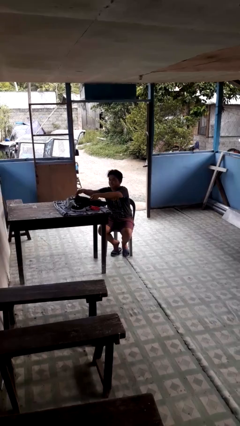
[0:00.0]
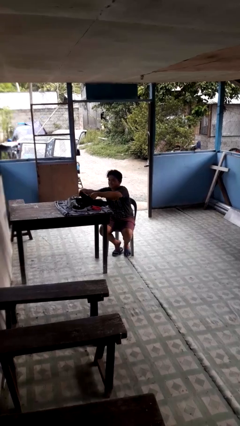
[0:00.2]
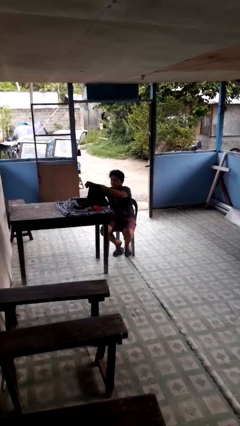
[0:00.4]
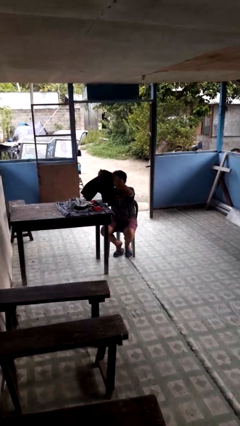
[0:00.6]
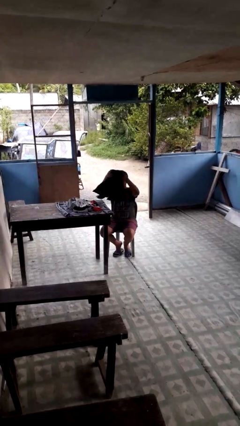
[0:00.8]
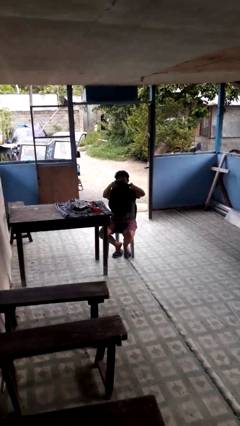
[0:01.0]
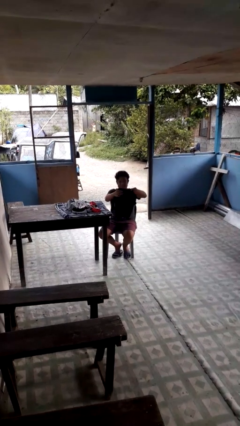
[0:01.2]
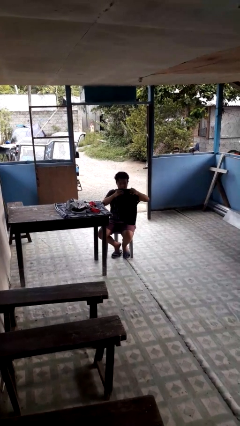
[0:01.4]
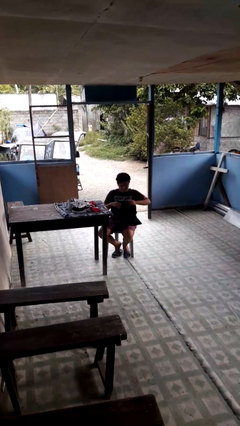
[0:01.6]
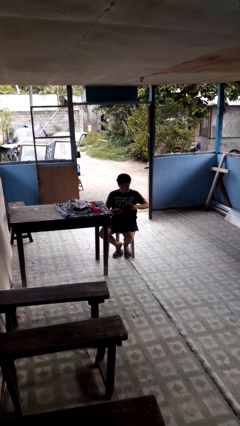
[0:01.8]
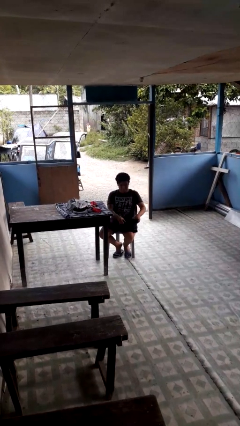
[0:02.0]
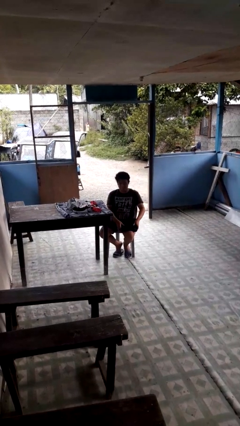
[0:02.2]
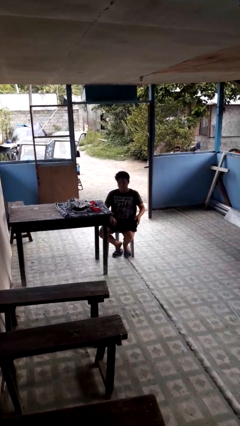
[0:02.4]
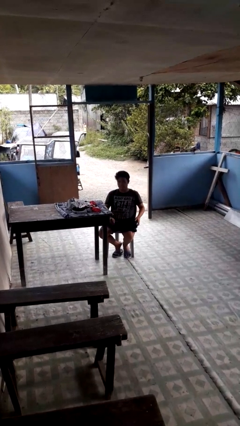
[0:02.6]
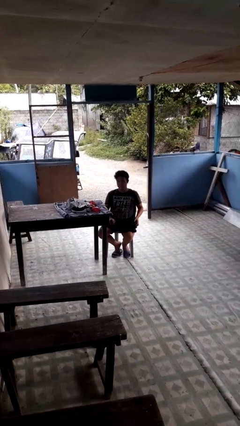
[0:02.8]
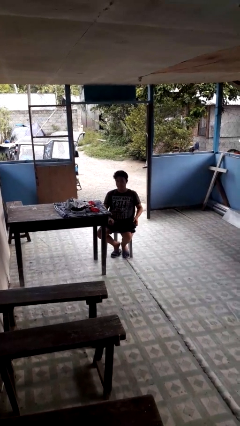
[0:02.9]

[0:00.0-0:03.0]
person folds pants

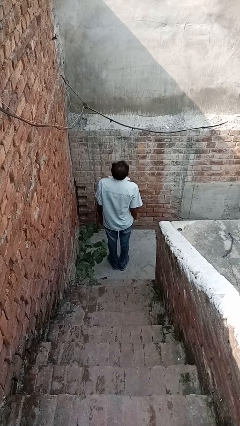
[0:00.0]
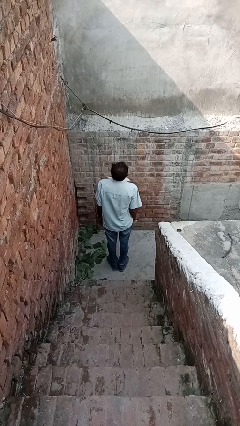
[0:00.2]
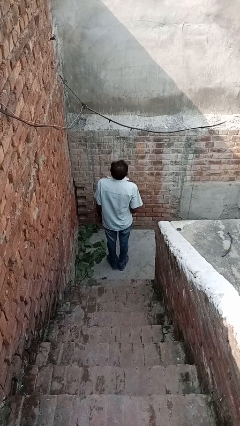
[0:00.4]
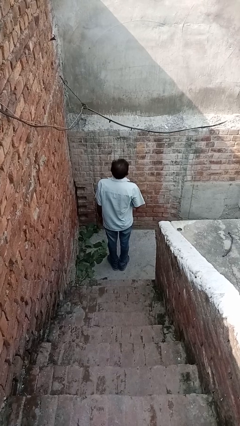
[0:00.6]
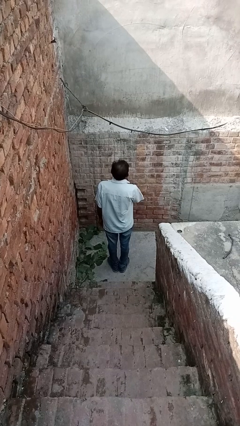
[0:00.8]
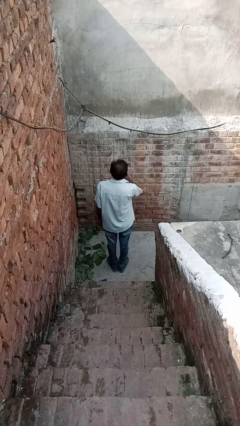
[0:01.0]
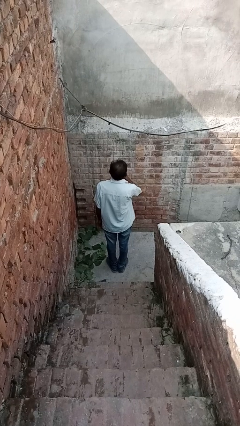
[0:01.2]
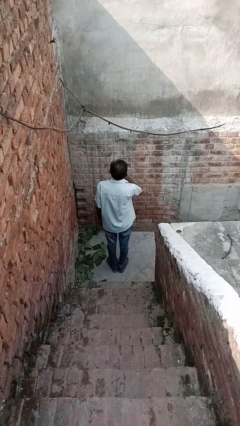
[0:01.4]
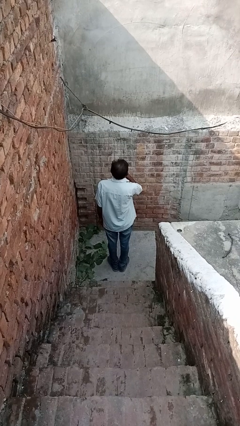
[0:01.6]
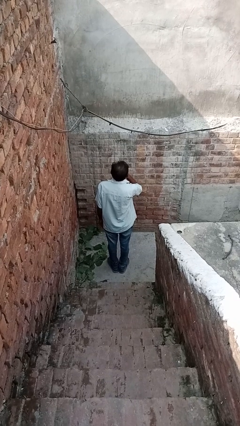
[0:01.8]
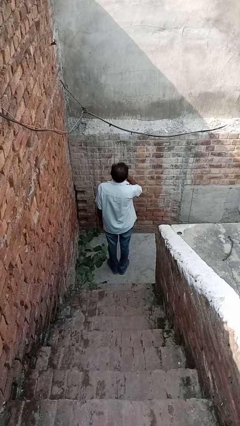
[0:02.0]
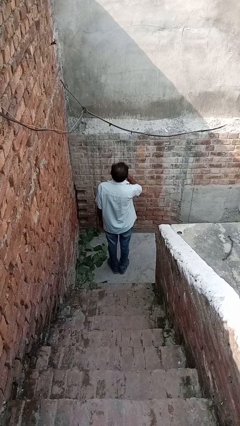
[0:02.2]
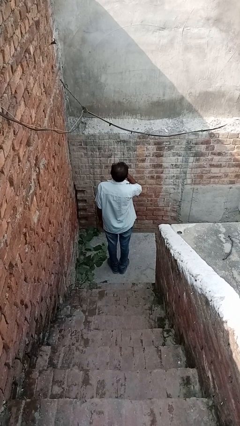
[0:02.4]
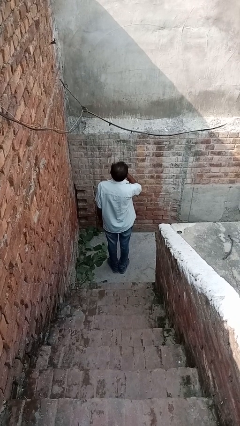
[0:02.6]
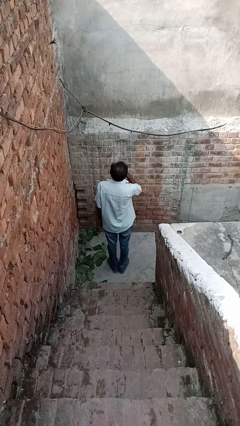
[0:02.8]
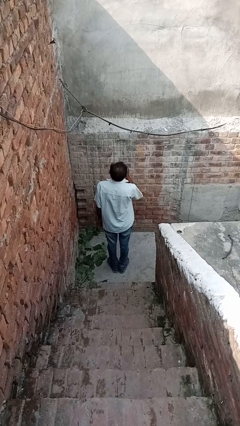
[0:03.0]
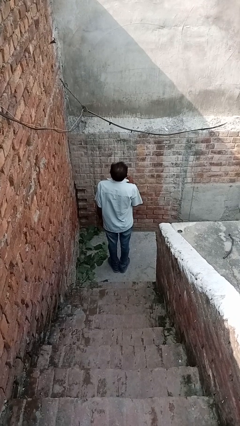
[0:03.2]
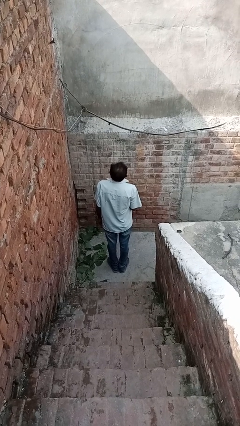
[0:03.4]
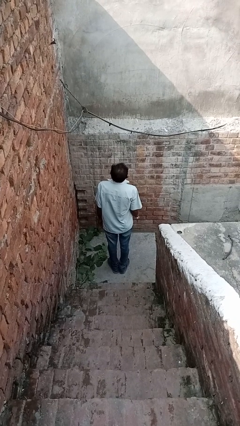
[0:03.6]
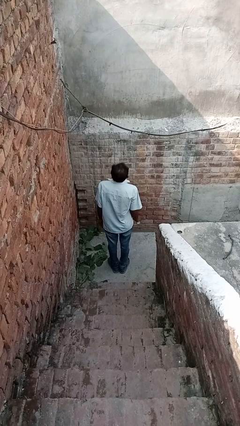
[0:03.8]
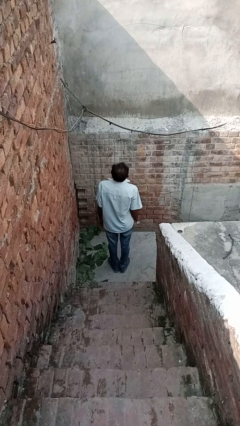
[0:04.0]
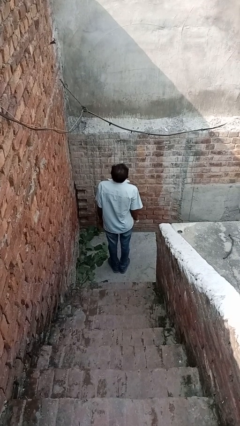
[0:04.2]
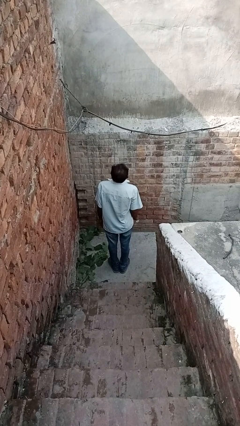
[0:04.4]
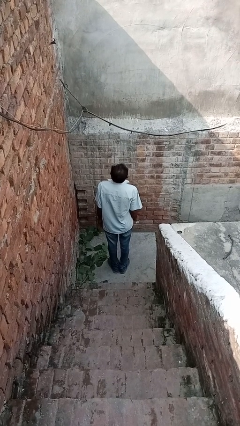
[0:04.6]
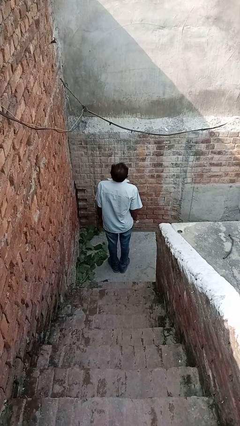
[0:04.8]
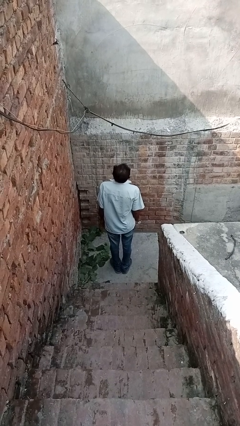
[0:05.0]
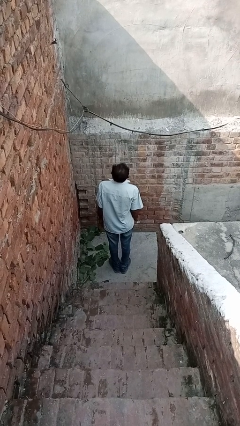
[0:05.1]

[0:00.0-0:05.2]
person vapes

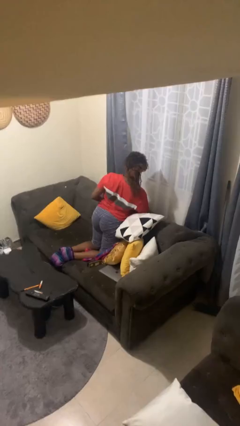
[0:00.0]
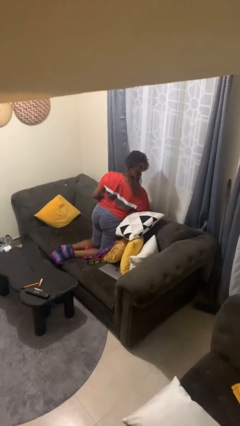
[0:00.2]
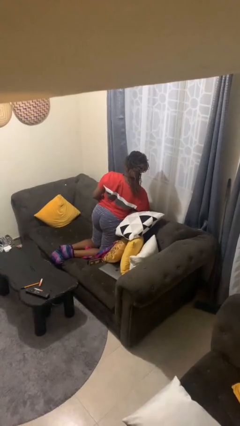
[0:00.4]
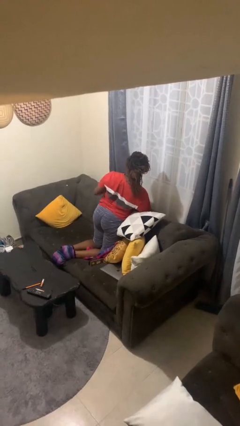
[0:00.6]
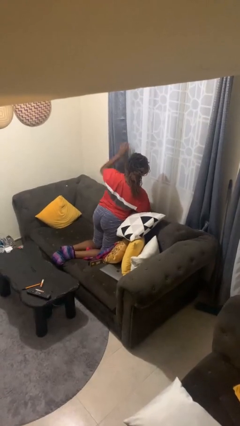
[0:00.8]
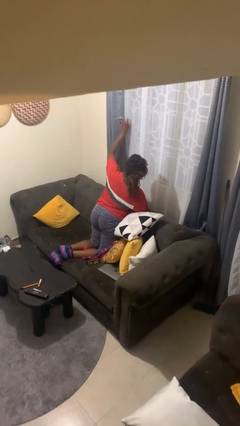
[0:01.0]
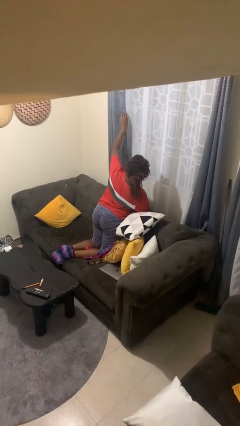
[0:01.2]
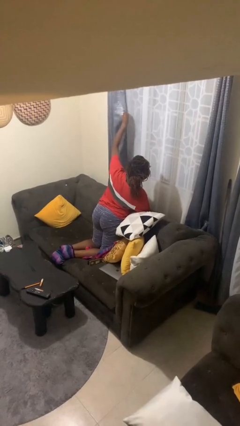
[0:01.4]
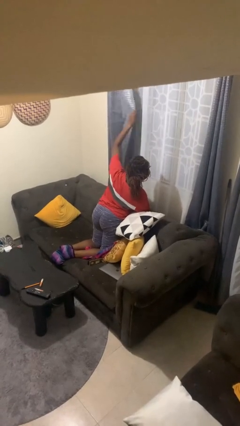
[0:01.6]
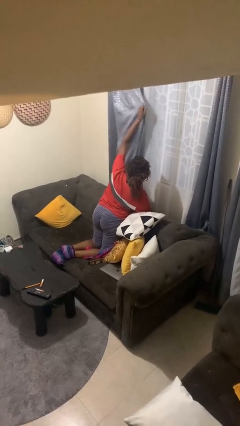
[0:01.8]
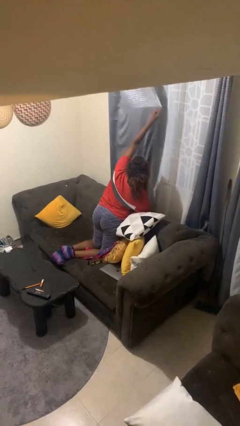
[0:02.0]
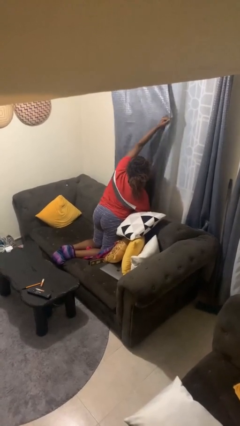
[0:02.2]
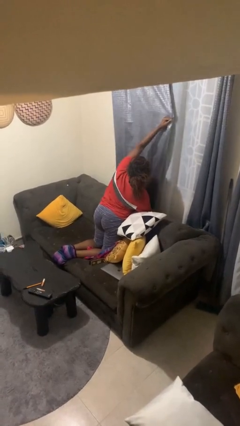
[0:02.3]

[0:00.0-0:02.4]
person closes curtains

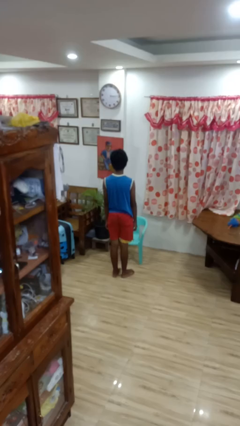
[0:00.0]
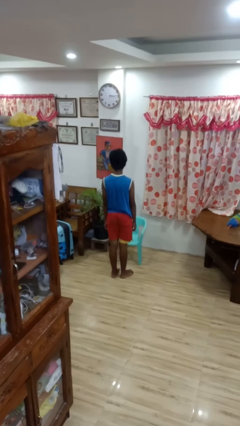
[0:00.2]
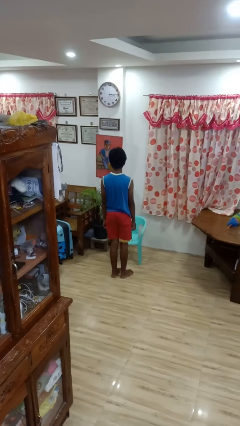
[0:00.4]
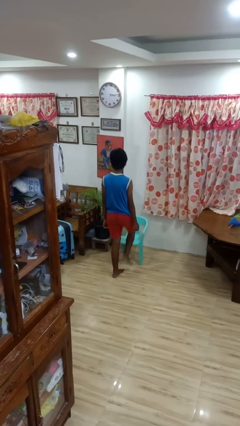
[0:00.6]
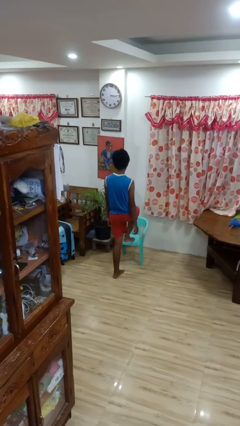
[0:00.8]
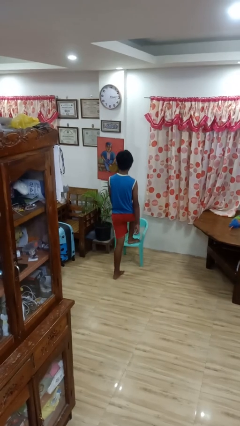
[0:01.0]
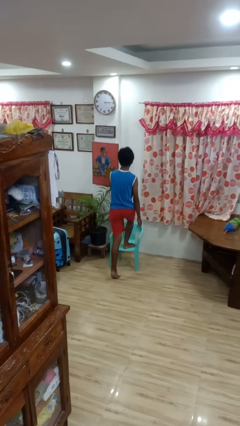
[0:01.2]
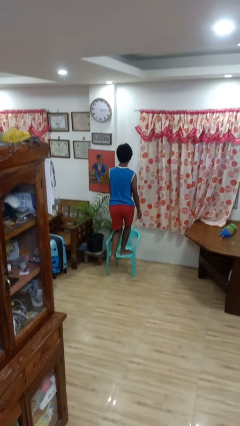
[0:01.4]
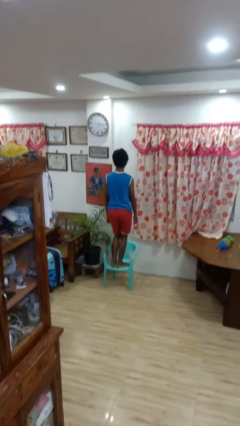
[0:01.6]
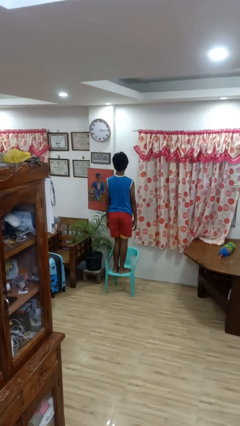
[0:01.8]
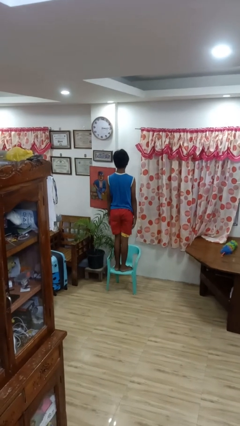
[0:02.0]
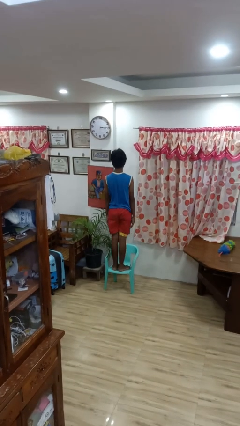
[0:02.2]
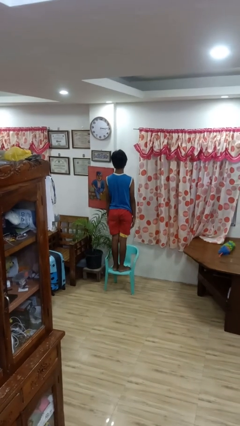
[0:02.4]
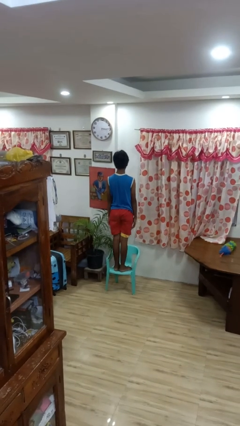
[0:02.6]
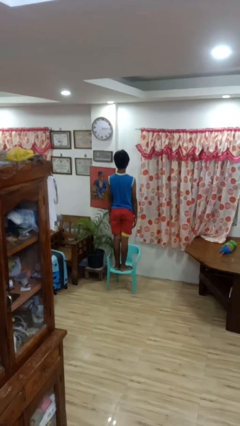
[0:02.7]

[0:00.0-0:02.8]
person climbs on chair

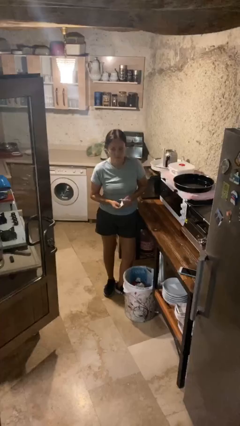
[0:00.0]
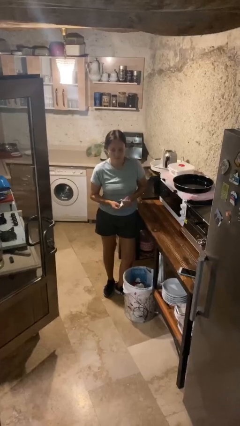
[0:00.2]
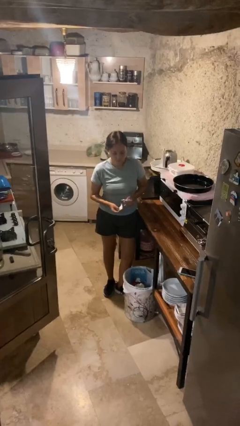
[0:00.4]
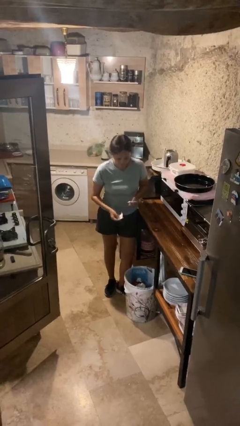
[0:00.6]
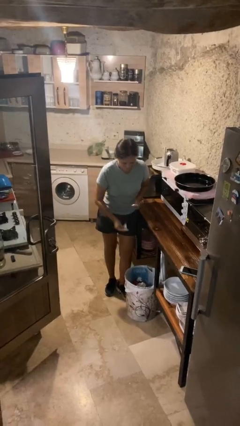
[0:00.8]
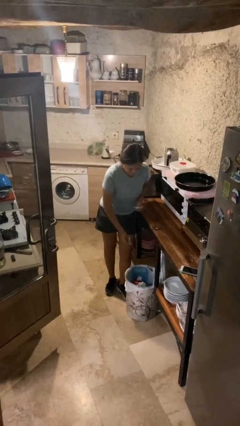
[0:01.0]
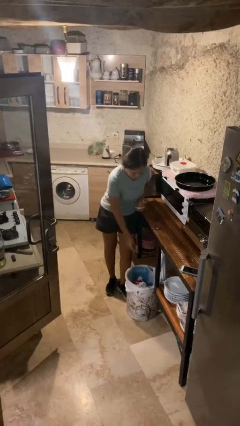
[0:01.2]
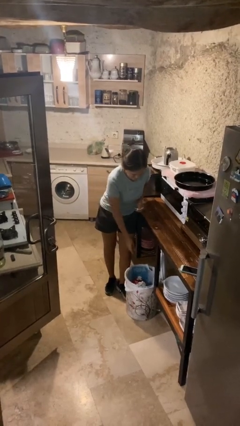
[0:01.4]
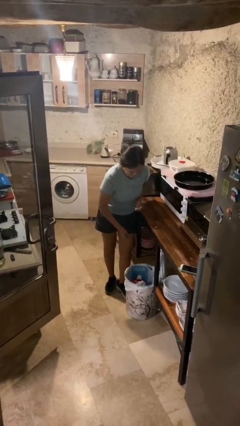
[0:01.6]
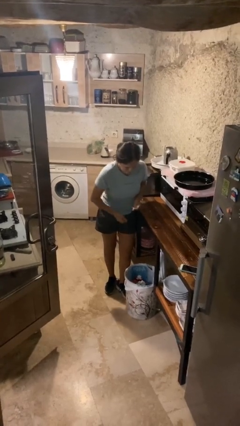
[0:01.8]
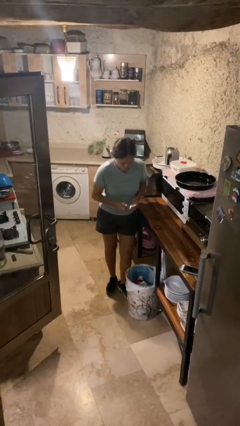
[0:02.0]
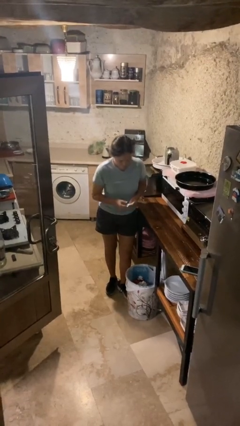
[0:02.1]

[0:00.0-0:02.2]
person discards trash

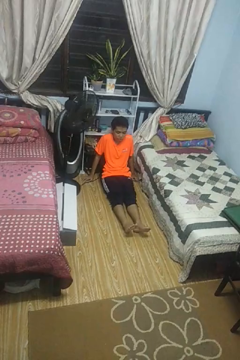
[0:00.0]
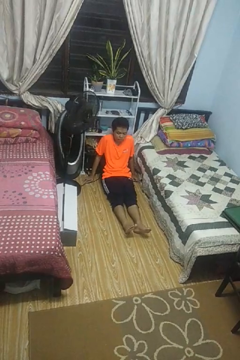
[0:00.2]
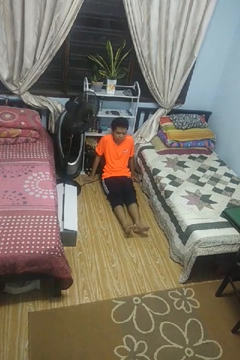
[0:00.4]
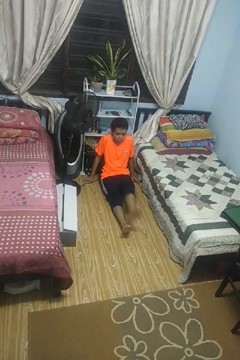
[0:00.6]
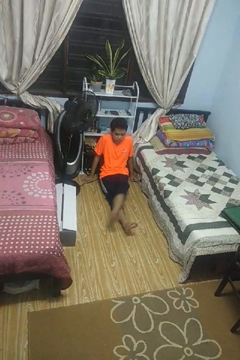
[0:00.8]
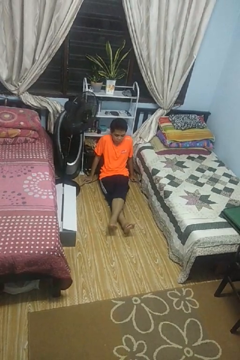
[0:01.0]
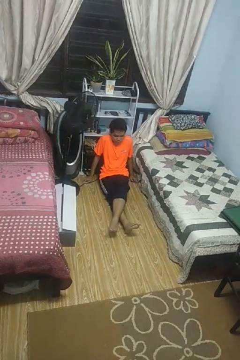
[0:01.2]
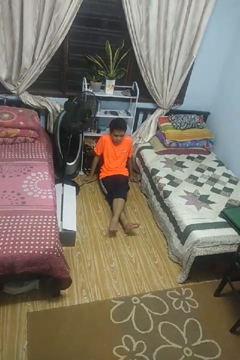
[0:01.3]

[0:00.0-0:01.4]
person crosses legs

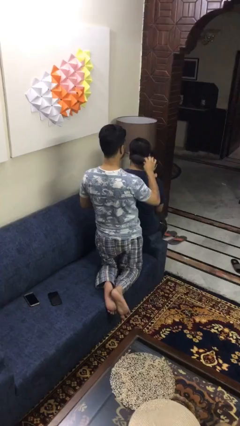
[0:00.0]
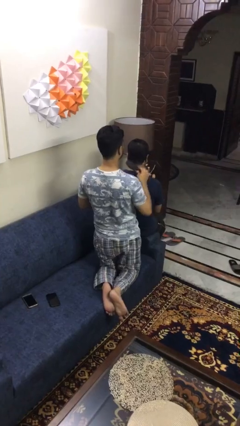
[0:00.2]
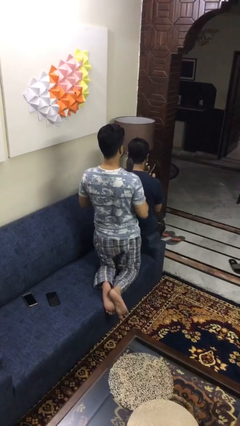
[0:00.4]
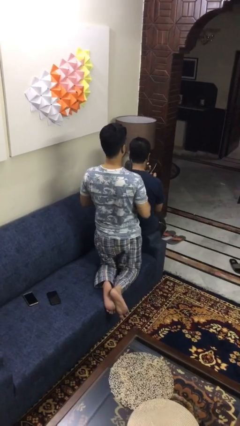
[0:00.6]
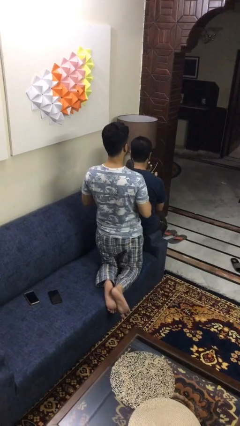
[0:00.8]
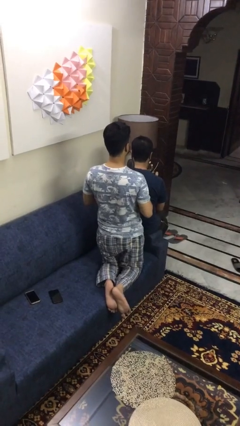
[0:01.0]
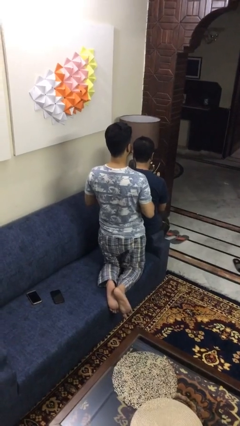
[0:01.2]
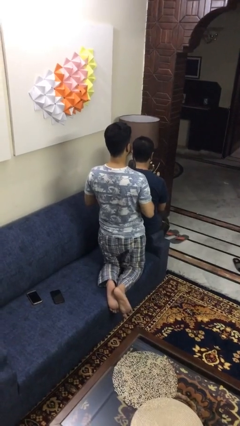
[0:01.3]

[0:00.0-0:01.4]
person brushes hair of person
